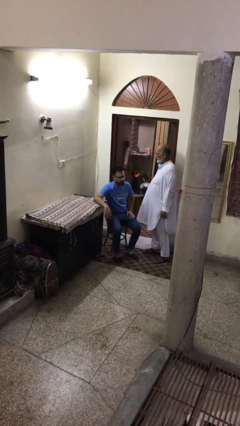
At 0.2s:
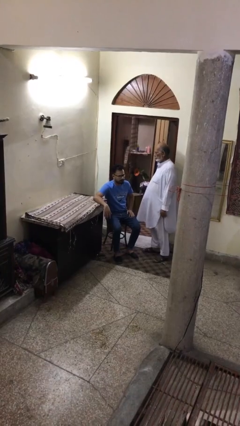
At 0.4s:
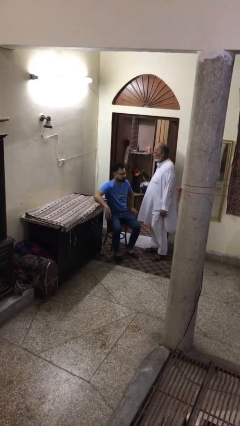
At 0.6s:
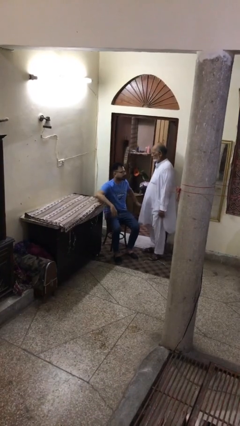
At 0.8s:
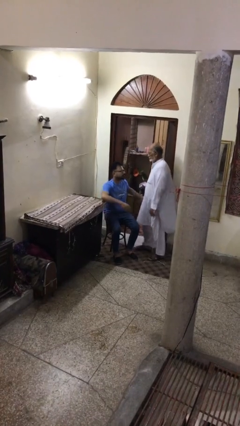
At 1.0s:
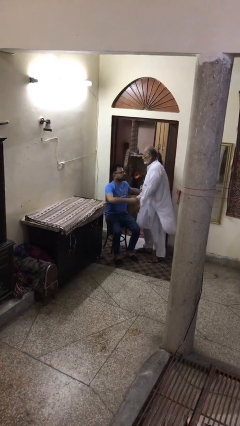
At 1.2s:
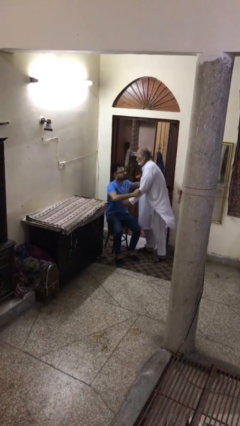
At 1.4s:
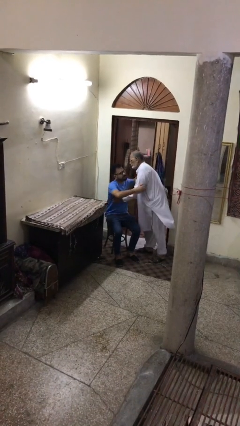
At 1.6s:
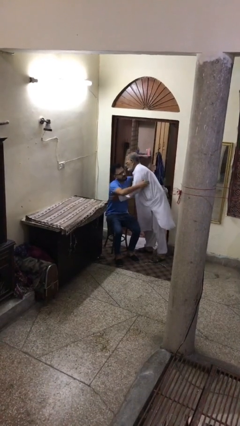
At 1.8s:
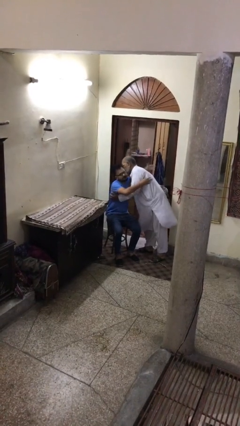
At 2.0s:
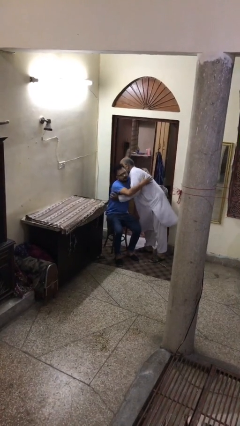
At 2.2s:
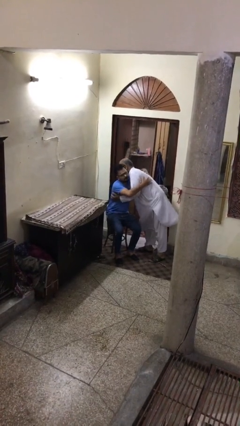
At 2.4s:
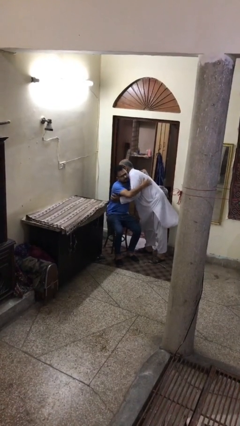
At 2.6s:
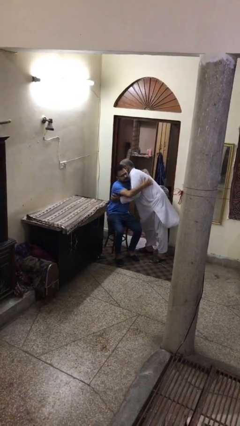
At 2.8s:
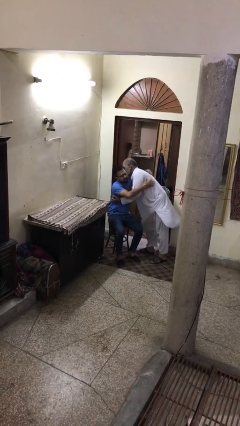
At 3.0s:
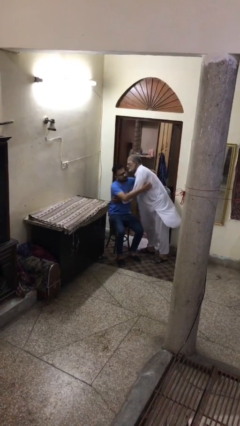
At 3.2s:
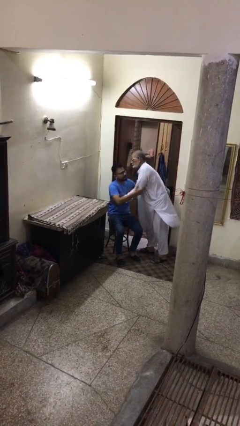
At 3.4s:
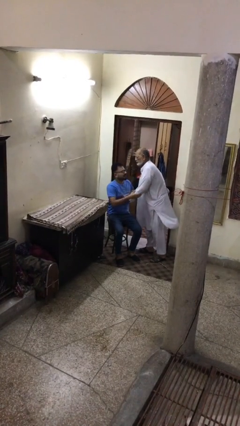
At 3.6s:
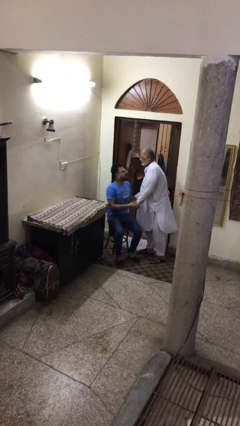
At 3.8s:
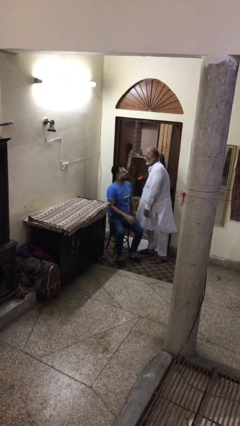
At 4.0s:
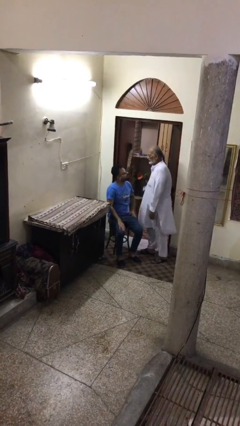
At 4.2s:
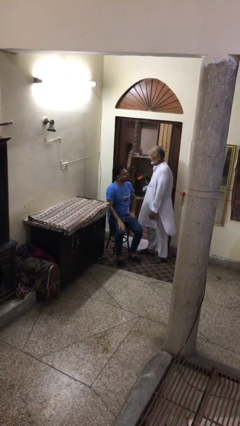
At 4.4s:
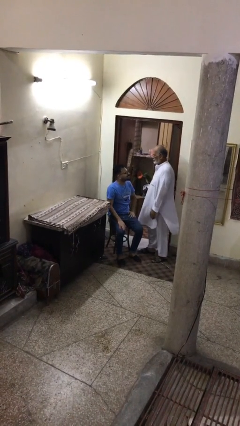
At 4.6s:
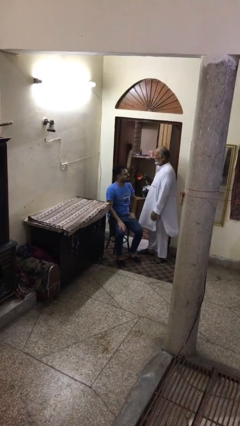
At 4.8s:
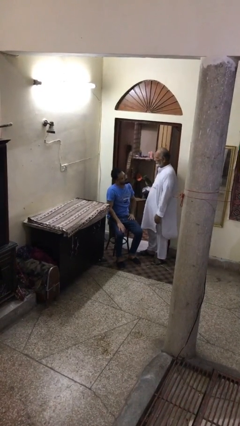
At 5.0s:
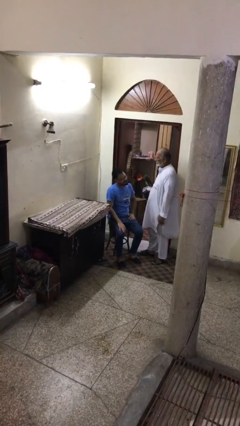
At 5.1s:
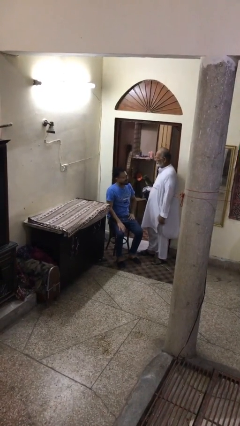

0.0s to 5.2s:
person embraces person

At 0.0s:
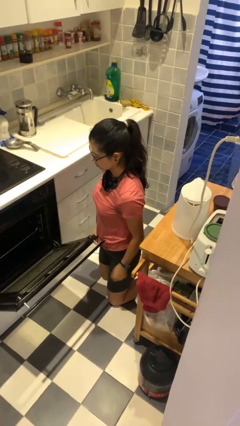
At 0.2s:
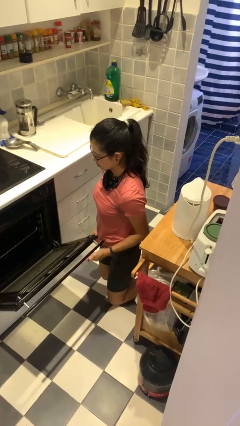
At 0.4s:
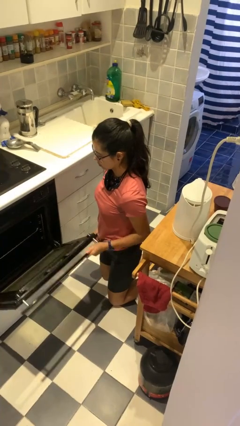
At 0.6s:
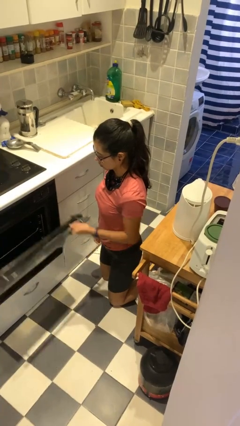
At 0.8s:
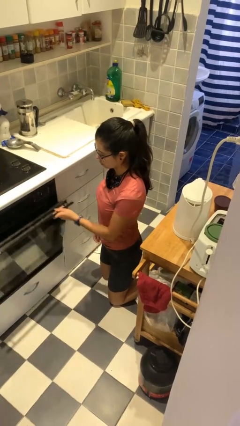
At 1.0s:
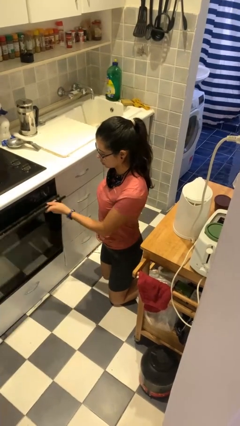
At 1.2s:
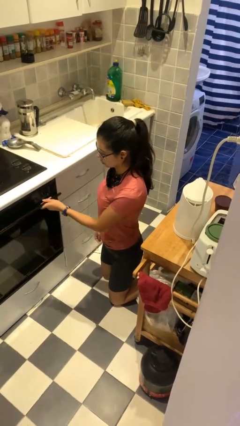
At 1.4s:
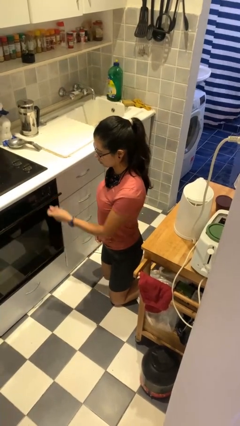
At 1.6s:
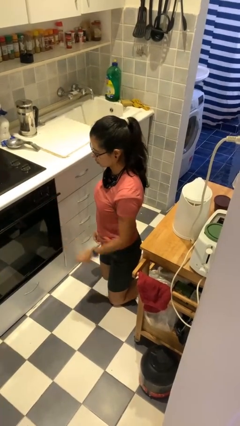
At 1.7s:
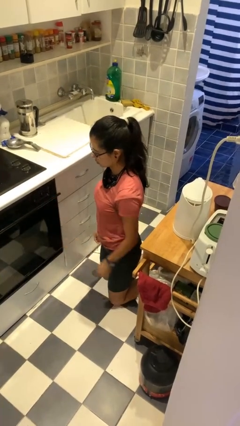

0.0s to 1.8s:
person closes oven door

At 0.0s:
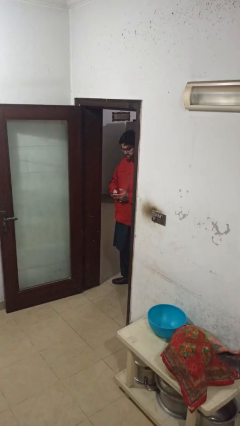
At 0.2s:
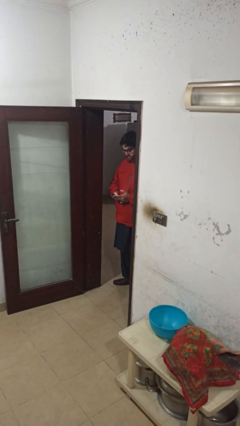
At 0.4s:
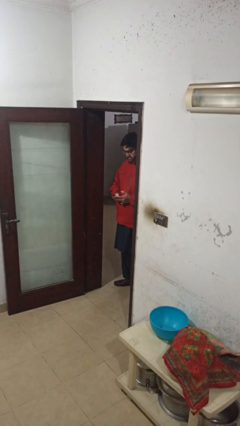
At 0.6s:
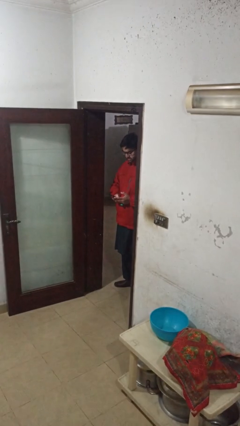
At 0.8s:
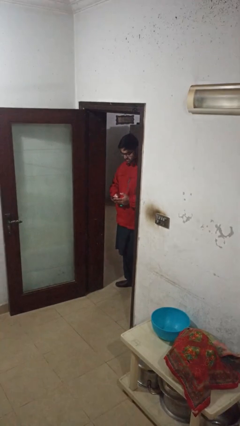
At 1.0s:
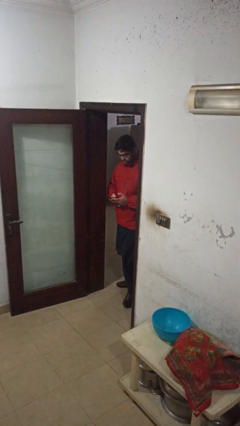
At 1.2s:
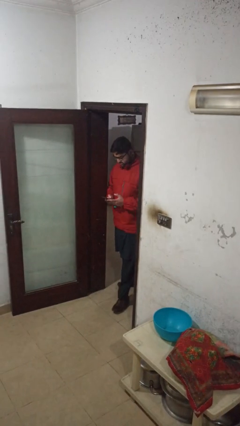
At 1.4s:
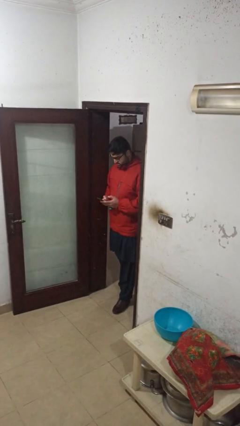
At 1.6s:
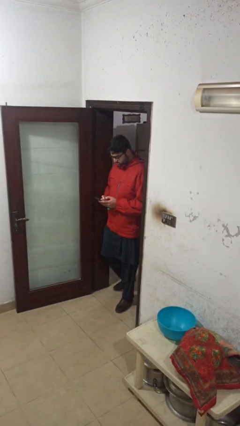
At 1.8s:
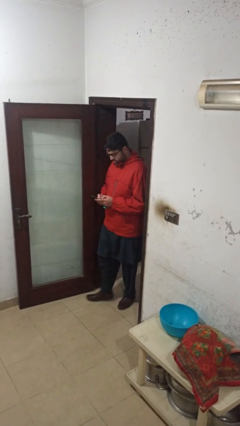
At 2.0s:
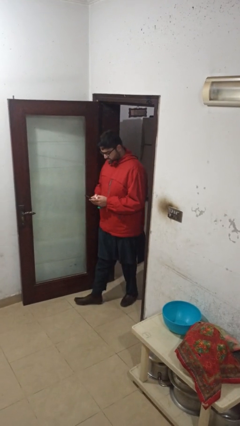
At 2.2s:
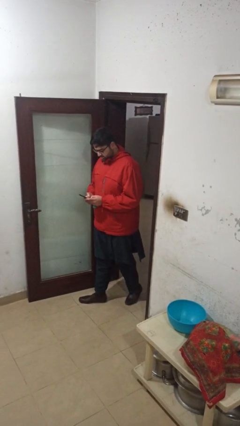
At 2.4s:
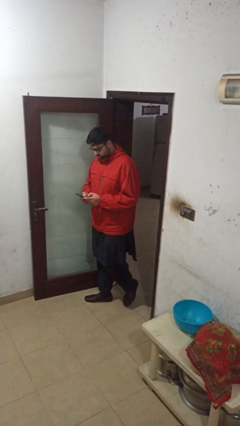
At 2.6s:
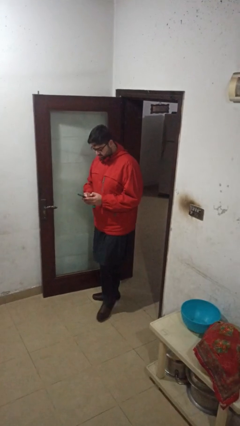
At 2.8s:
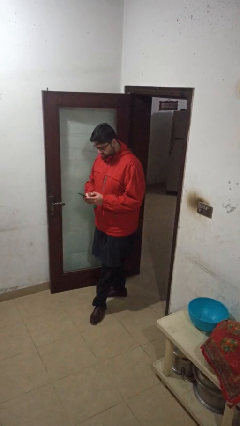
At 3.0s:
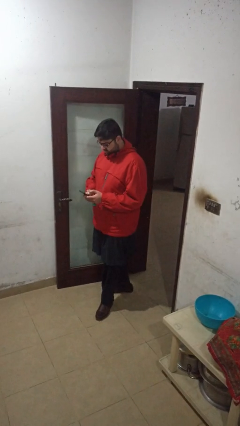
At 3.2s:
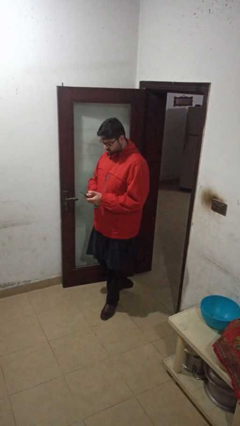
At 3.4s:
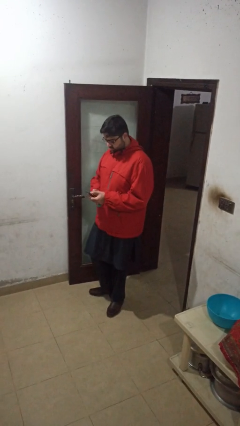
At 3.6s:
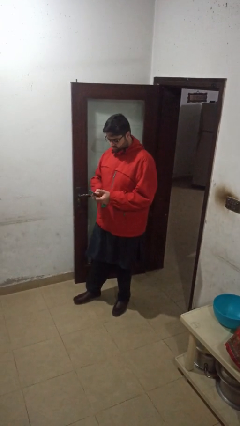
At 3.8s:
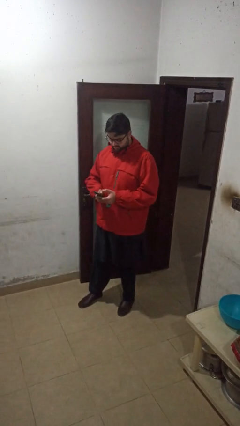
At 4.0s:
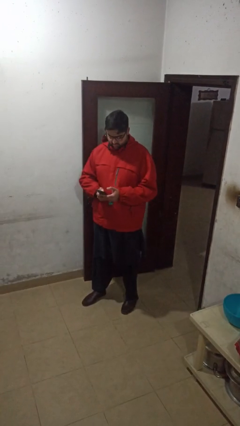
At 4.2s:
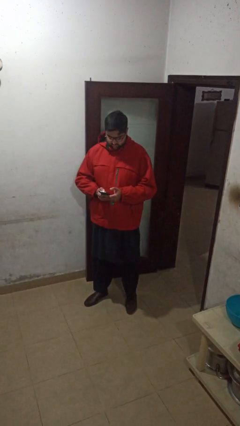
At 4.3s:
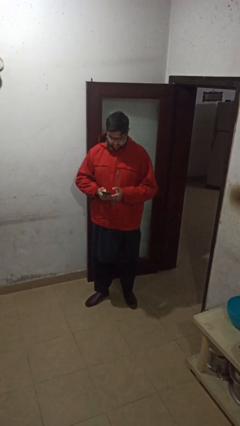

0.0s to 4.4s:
person enters scene through structure

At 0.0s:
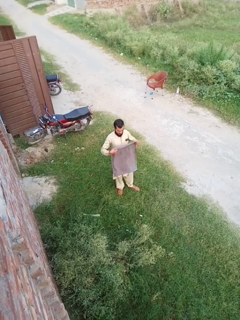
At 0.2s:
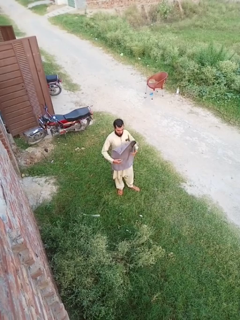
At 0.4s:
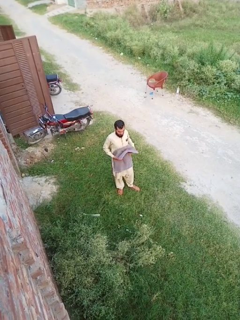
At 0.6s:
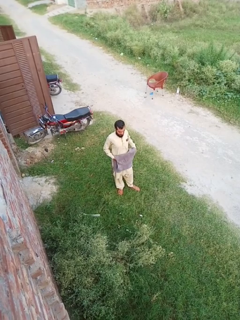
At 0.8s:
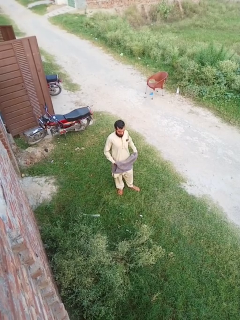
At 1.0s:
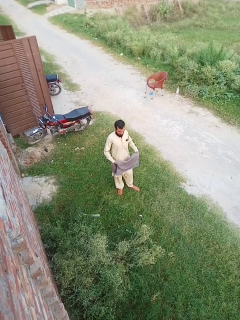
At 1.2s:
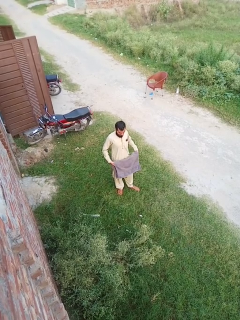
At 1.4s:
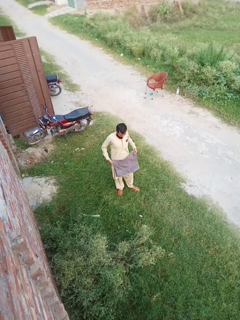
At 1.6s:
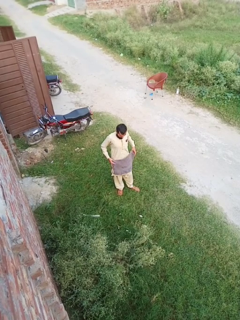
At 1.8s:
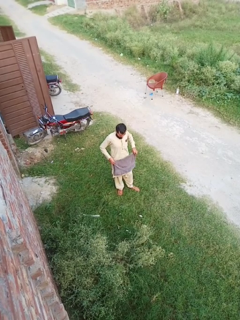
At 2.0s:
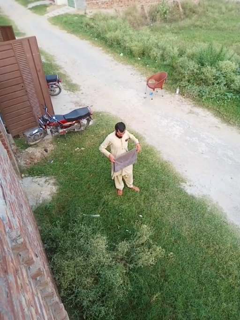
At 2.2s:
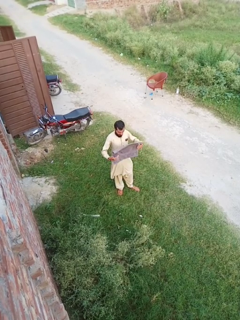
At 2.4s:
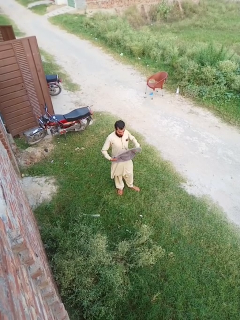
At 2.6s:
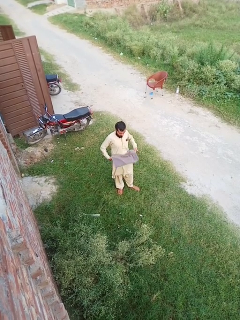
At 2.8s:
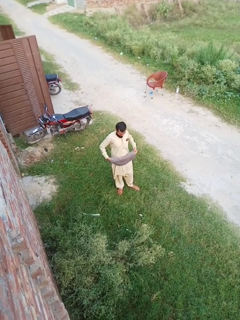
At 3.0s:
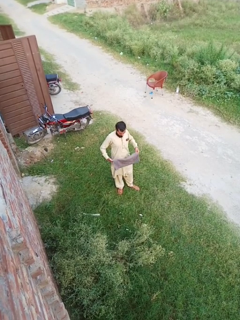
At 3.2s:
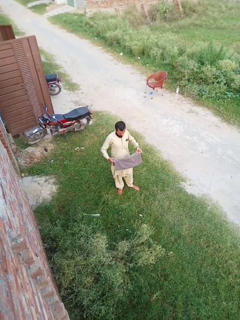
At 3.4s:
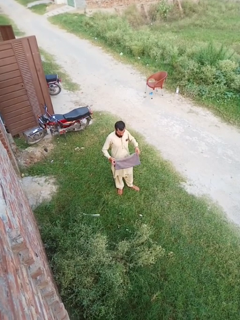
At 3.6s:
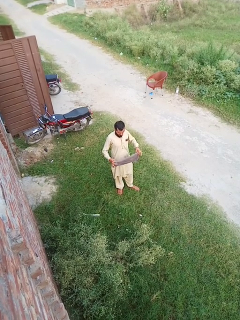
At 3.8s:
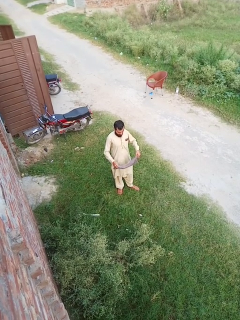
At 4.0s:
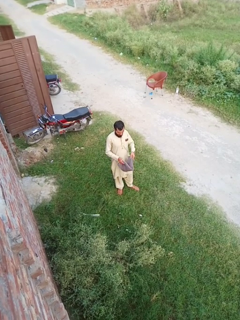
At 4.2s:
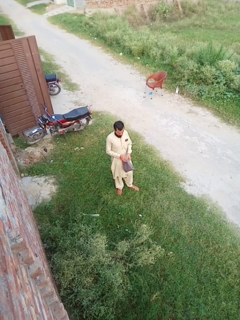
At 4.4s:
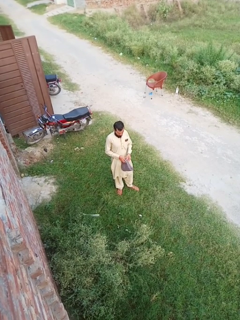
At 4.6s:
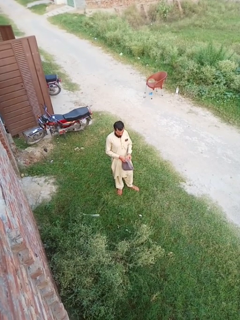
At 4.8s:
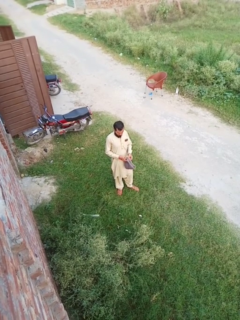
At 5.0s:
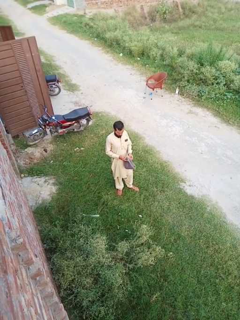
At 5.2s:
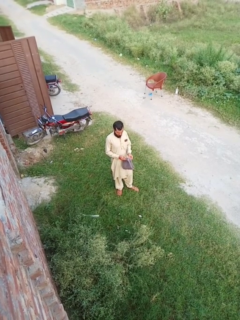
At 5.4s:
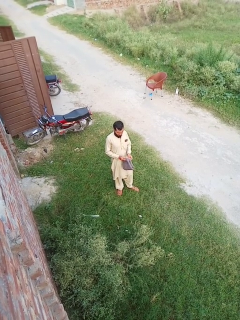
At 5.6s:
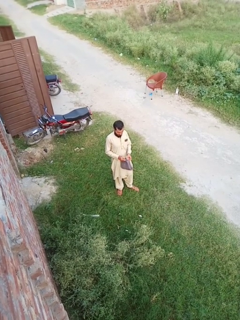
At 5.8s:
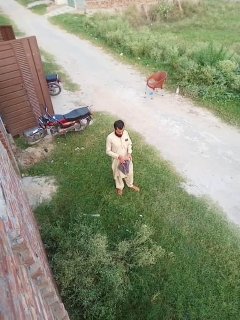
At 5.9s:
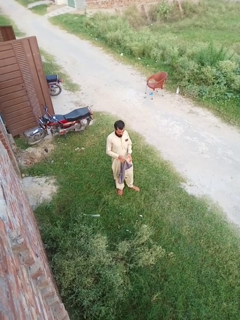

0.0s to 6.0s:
person folds towel

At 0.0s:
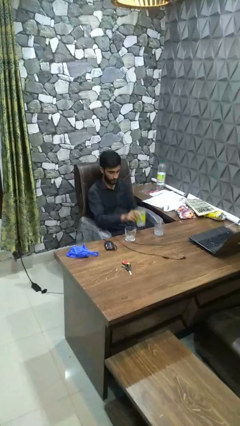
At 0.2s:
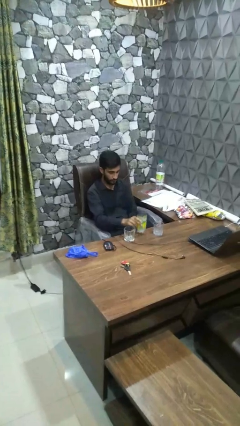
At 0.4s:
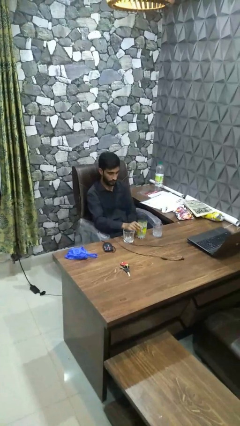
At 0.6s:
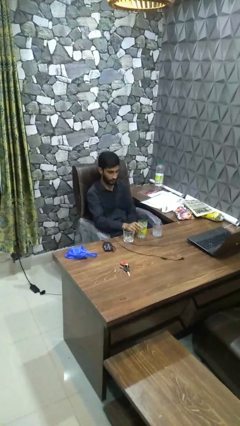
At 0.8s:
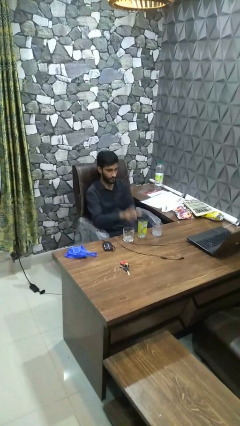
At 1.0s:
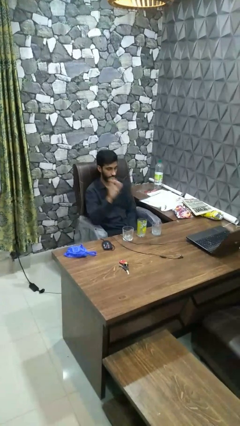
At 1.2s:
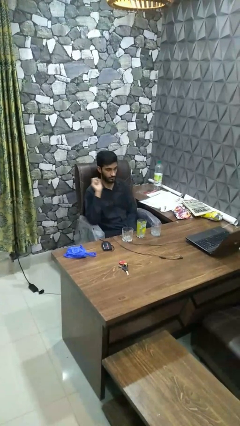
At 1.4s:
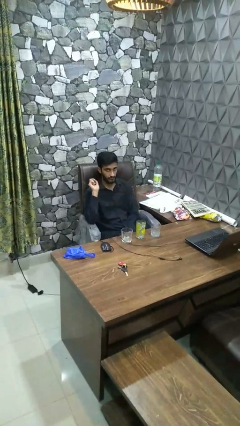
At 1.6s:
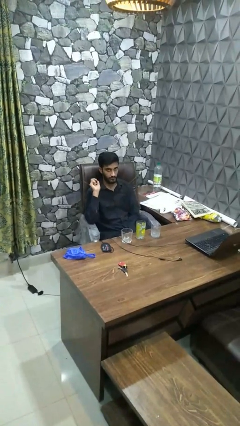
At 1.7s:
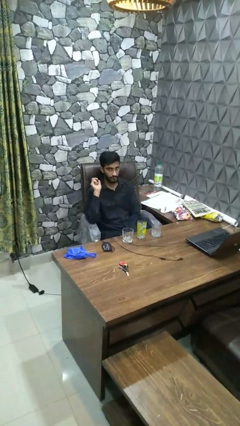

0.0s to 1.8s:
person puts down object on table
